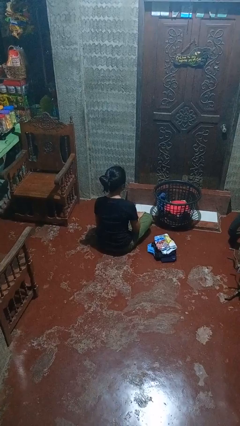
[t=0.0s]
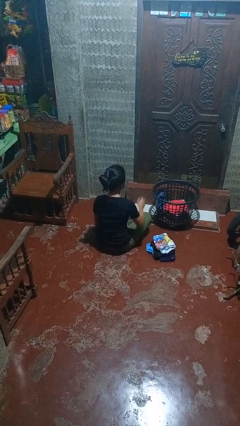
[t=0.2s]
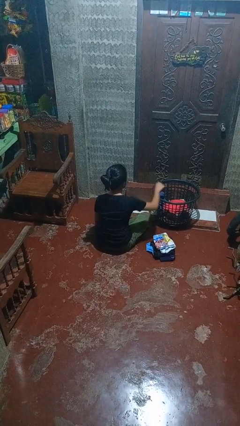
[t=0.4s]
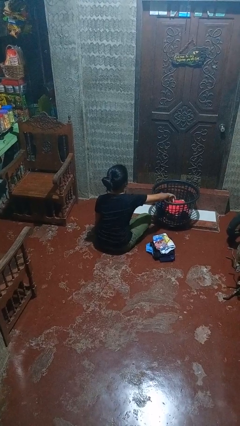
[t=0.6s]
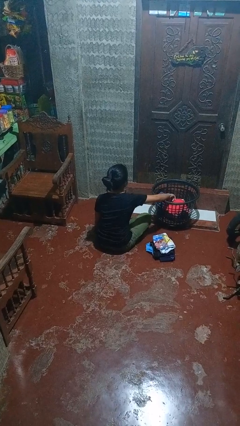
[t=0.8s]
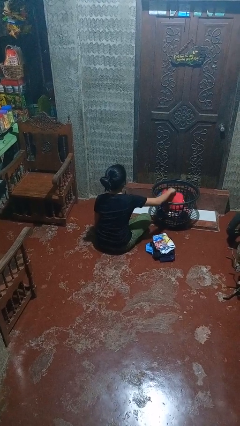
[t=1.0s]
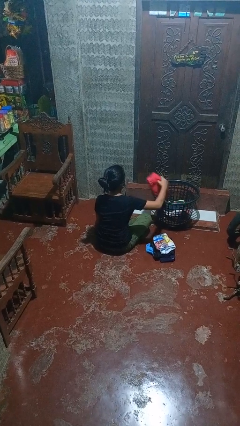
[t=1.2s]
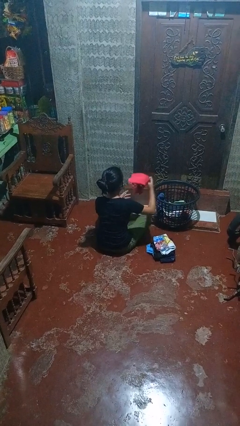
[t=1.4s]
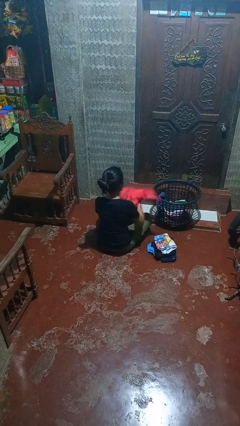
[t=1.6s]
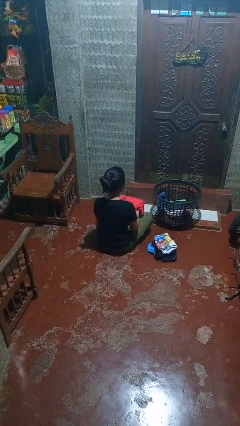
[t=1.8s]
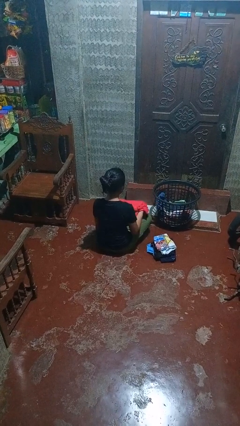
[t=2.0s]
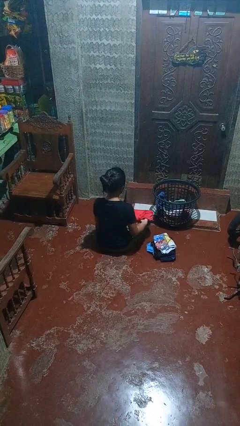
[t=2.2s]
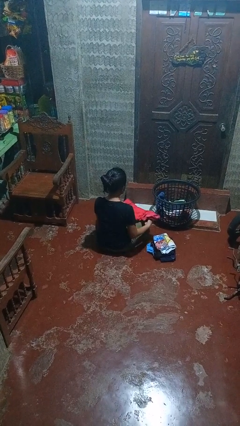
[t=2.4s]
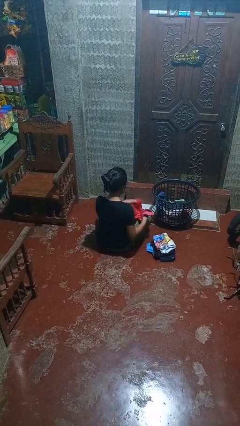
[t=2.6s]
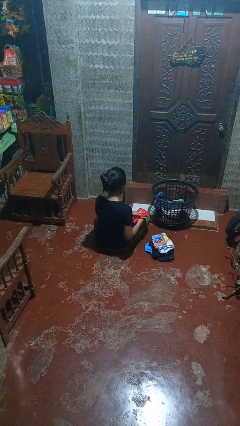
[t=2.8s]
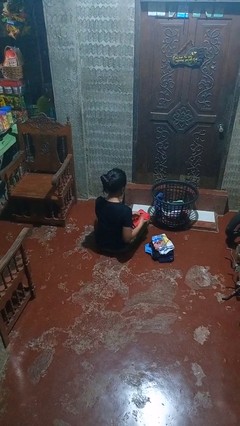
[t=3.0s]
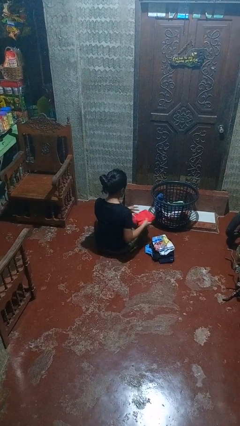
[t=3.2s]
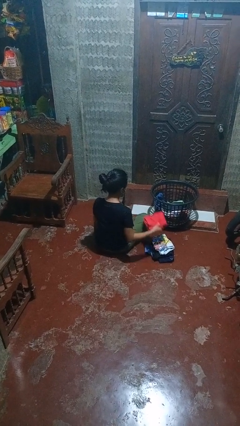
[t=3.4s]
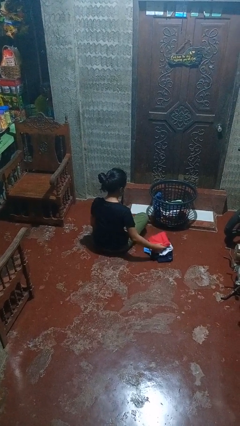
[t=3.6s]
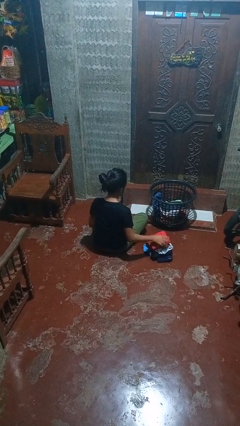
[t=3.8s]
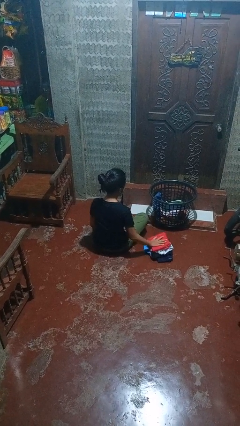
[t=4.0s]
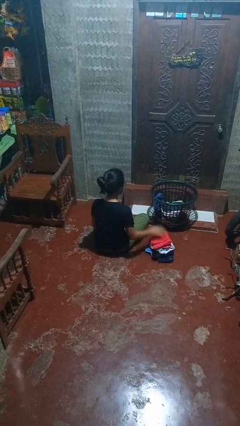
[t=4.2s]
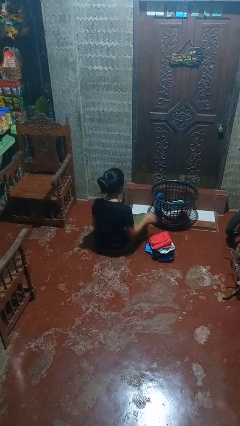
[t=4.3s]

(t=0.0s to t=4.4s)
person folds shirt

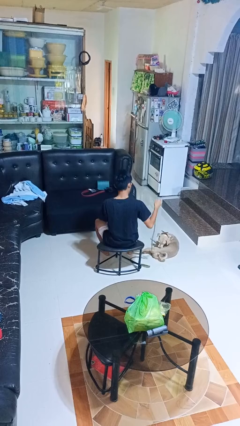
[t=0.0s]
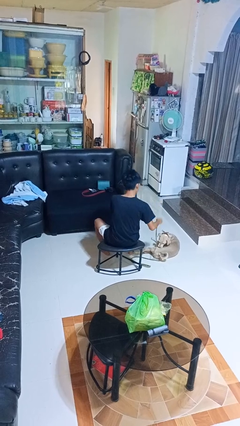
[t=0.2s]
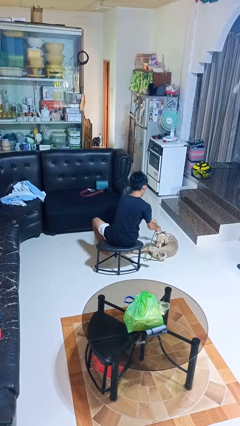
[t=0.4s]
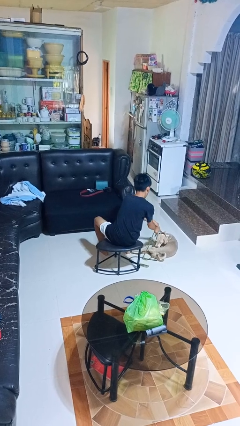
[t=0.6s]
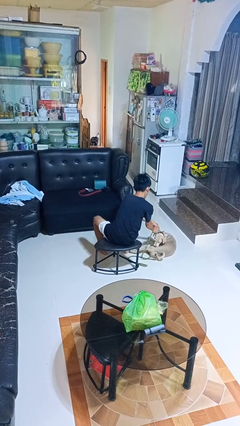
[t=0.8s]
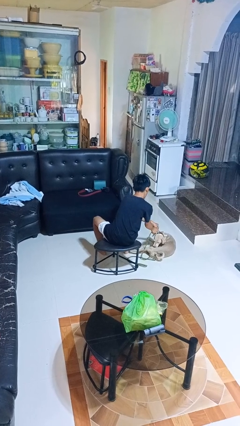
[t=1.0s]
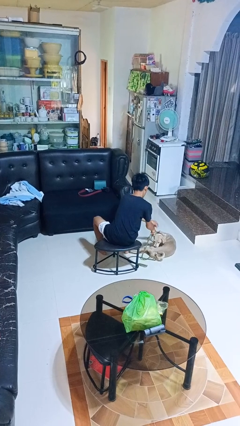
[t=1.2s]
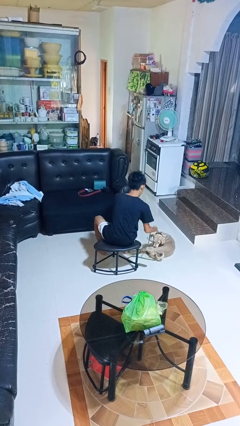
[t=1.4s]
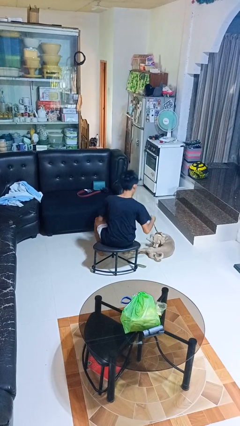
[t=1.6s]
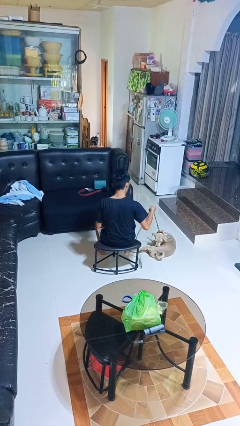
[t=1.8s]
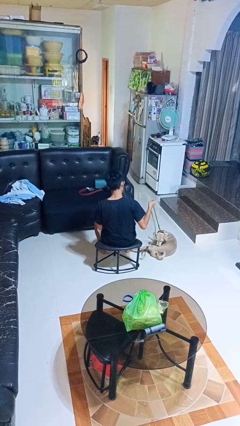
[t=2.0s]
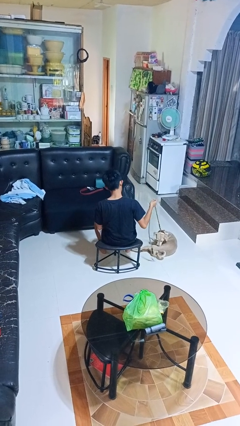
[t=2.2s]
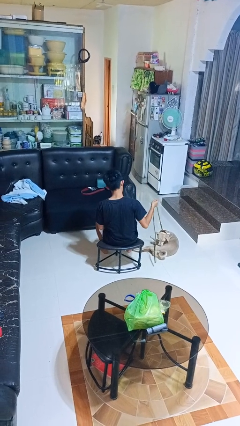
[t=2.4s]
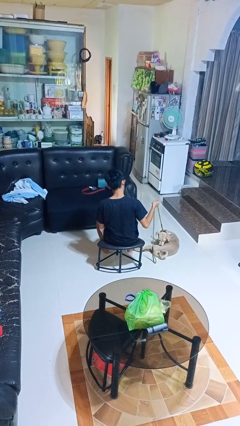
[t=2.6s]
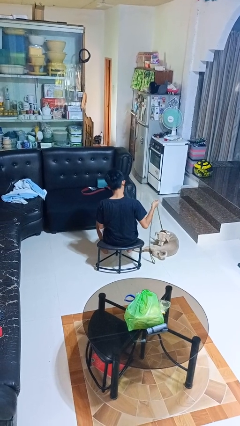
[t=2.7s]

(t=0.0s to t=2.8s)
person attaches leash to dog

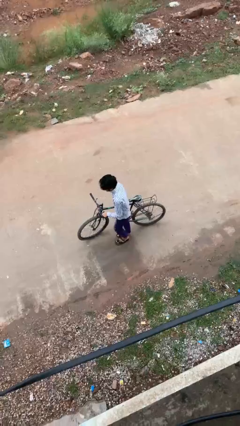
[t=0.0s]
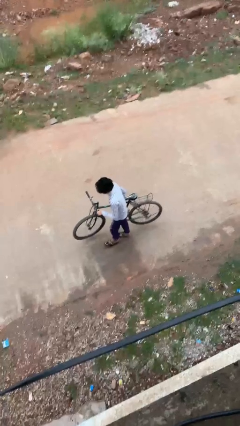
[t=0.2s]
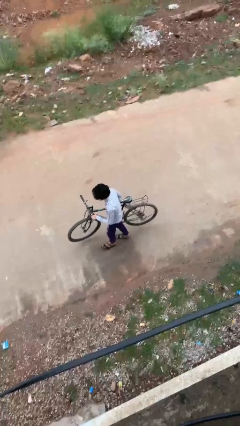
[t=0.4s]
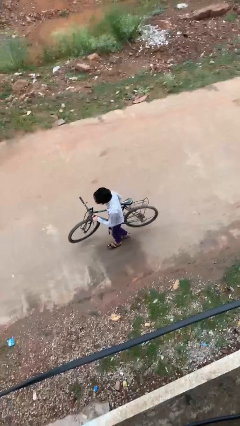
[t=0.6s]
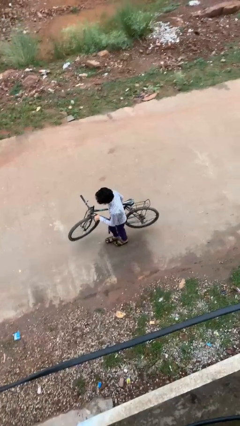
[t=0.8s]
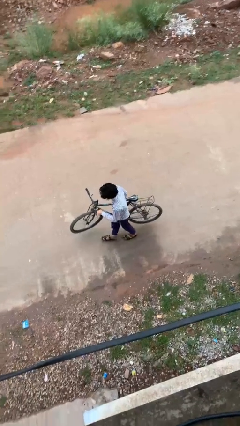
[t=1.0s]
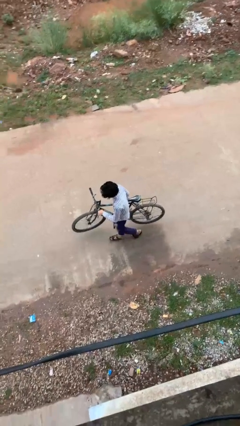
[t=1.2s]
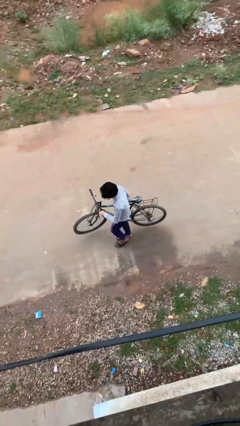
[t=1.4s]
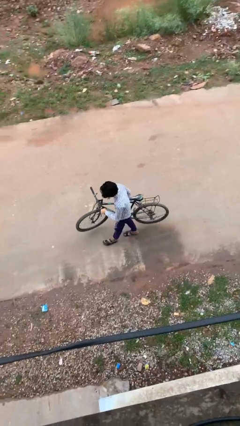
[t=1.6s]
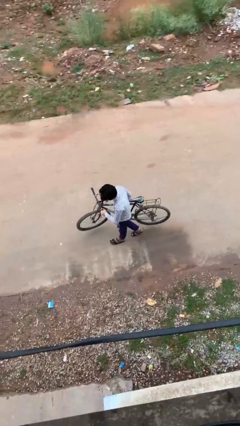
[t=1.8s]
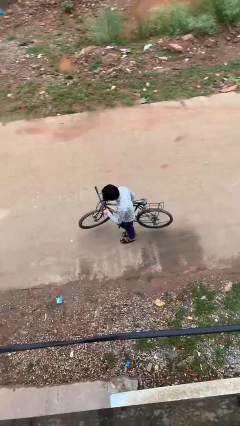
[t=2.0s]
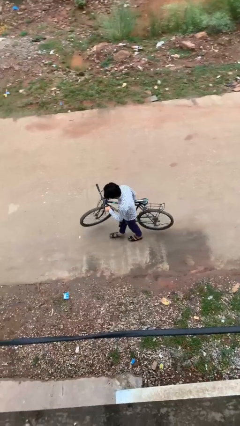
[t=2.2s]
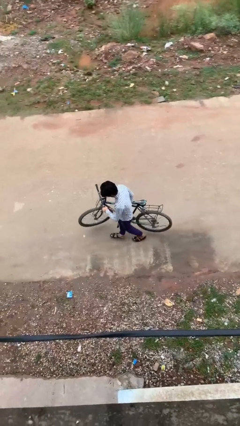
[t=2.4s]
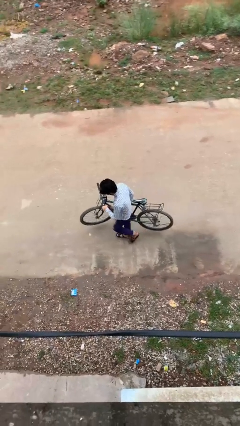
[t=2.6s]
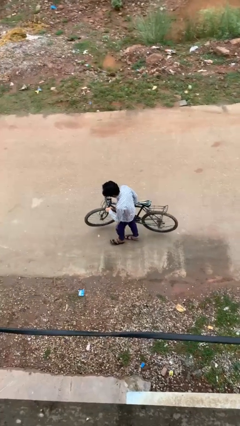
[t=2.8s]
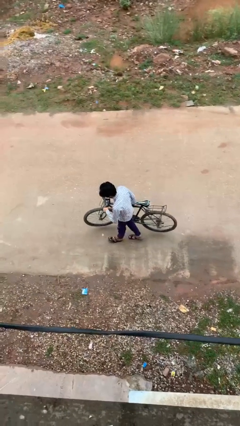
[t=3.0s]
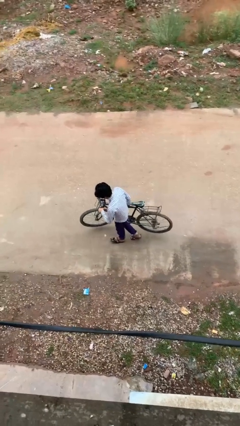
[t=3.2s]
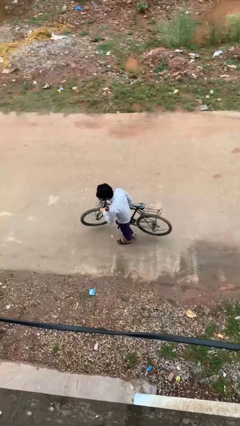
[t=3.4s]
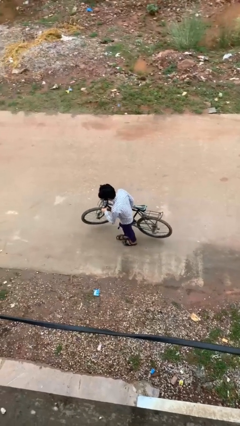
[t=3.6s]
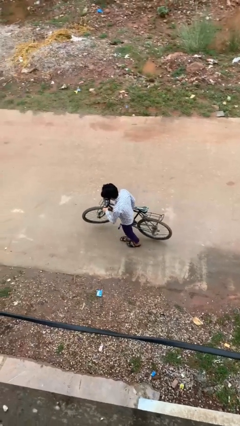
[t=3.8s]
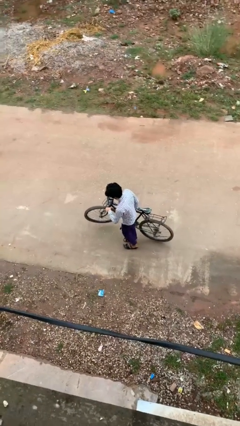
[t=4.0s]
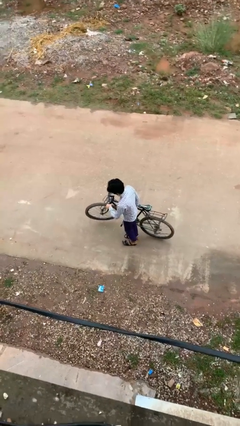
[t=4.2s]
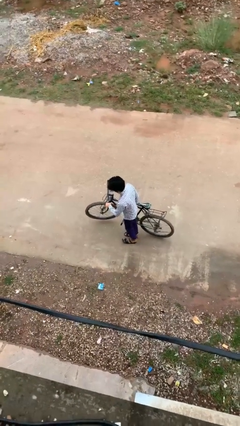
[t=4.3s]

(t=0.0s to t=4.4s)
person carries bicycle

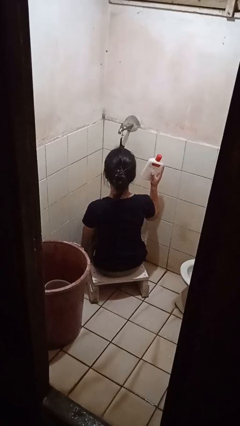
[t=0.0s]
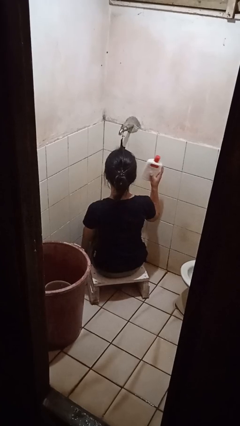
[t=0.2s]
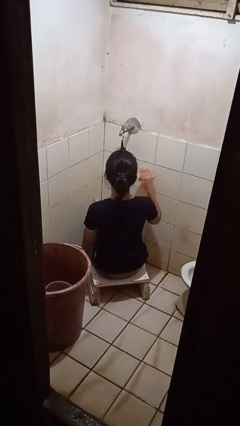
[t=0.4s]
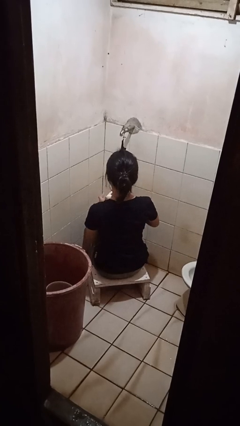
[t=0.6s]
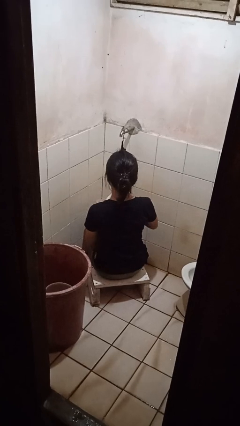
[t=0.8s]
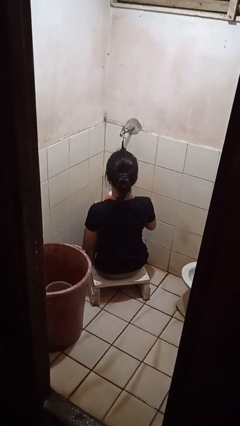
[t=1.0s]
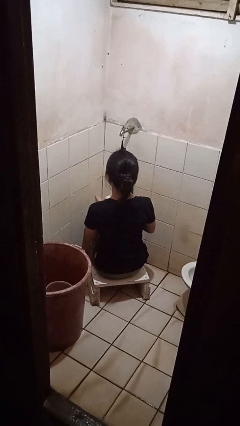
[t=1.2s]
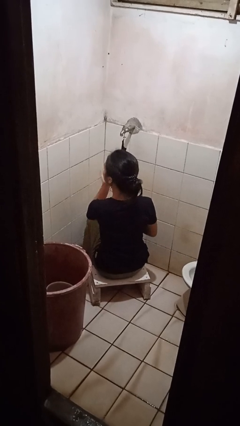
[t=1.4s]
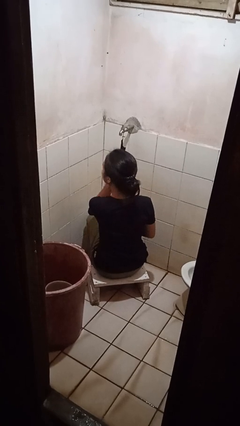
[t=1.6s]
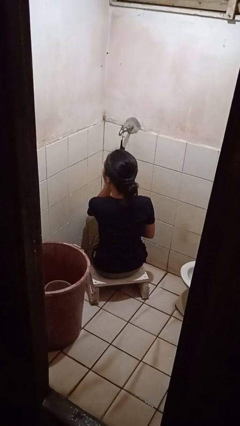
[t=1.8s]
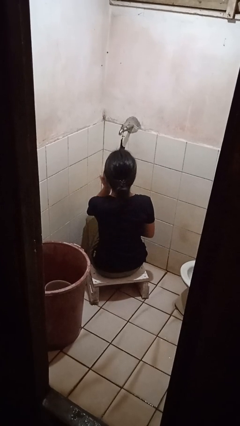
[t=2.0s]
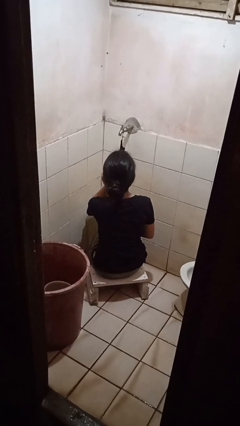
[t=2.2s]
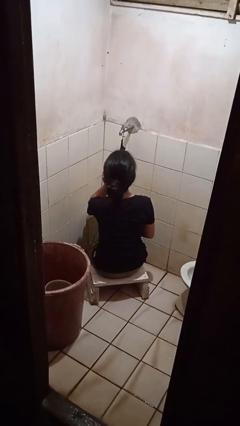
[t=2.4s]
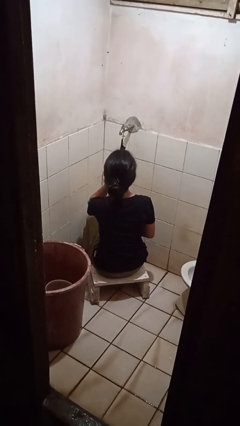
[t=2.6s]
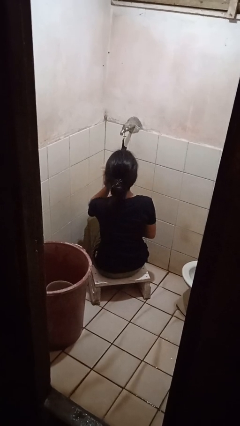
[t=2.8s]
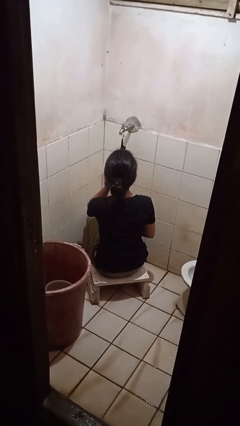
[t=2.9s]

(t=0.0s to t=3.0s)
person applies facial moisturizer

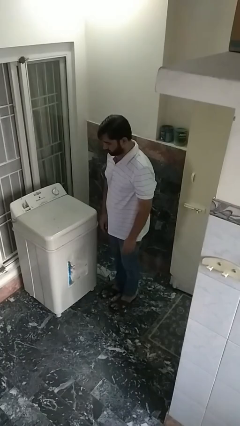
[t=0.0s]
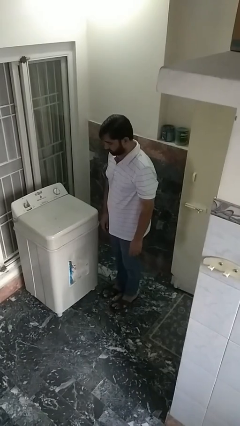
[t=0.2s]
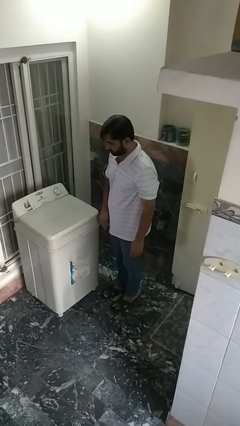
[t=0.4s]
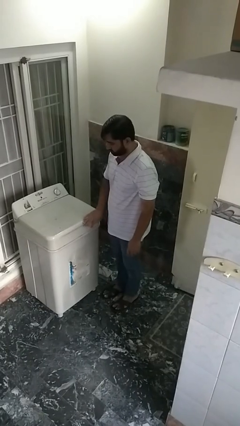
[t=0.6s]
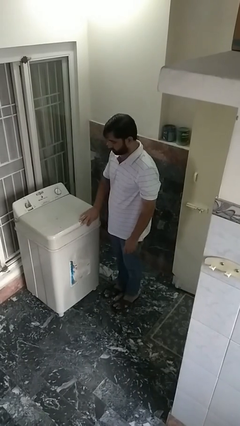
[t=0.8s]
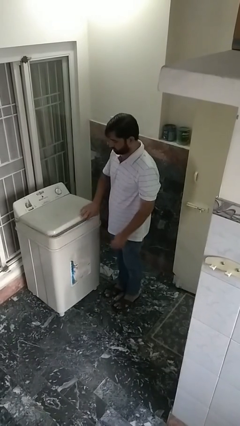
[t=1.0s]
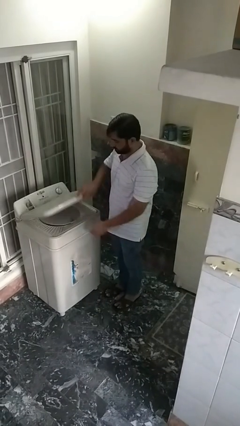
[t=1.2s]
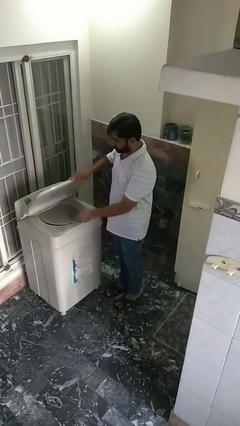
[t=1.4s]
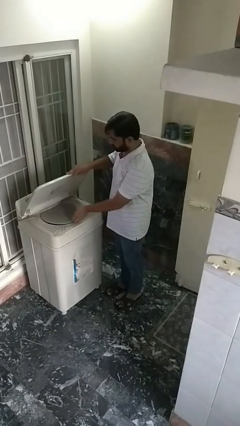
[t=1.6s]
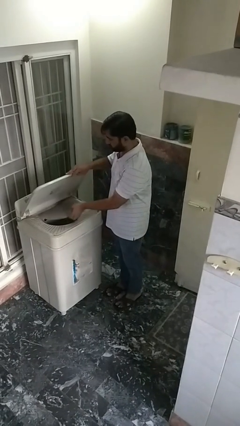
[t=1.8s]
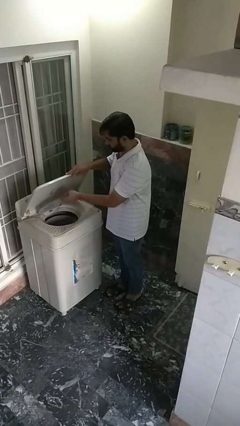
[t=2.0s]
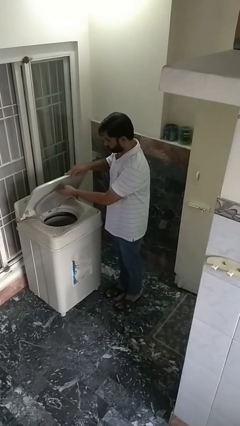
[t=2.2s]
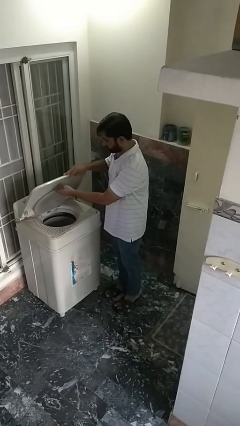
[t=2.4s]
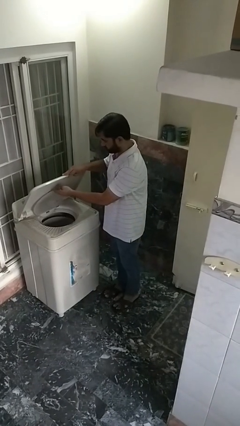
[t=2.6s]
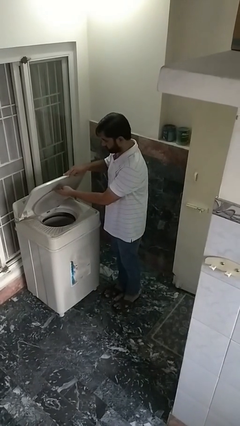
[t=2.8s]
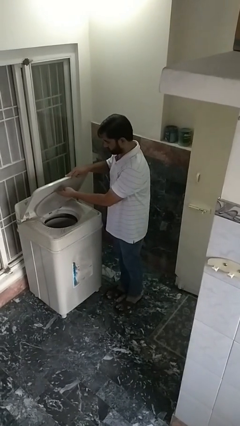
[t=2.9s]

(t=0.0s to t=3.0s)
person opens clothes washer

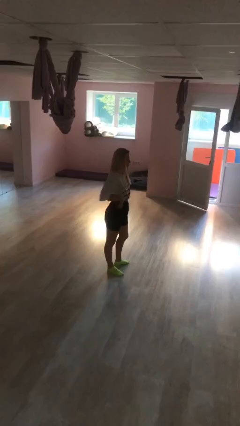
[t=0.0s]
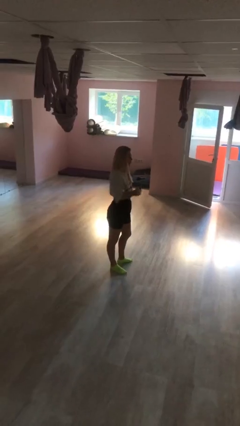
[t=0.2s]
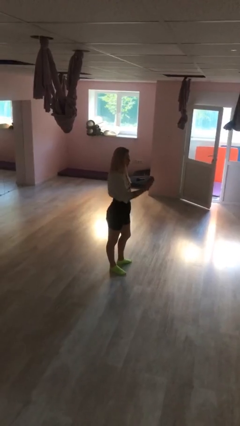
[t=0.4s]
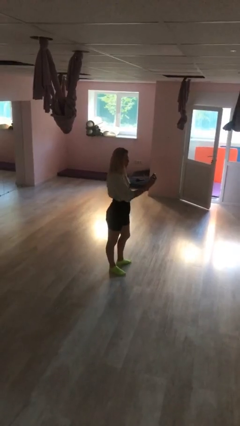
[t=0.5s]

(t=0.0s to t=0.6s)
person takes phone from pocket
